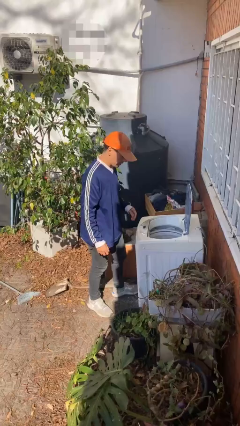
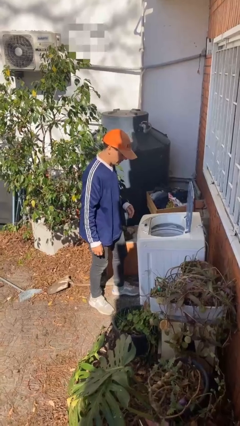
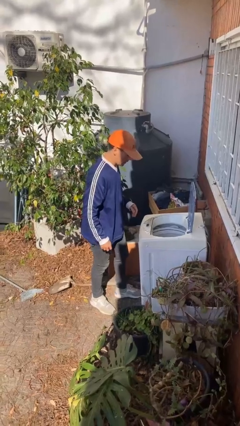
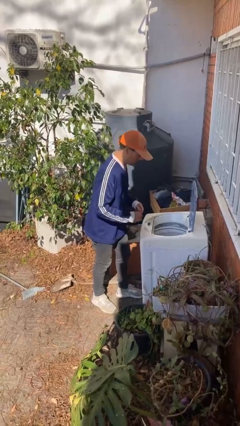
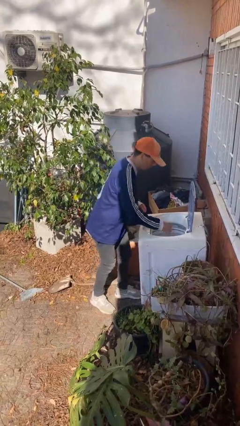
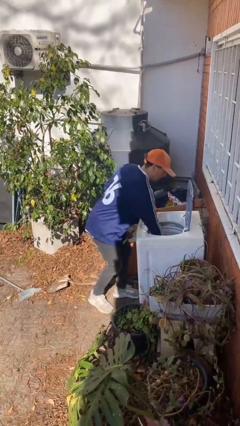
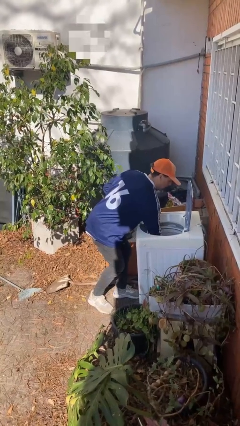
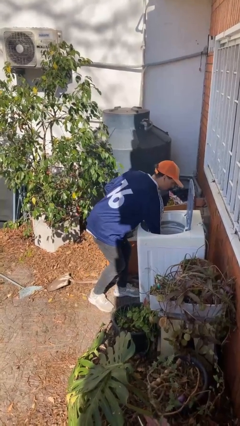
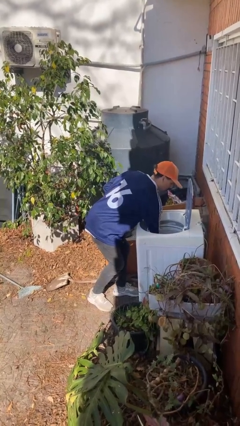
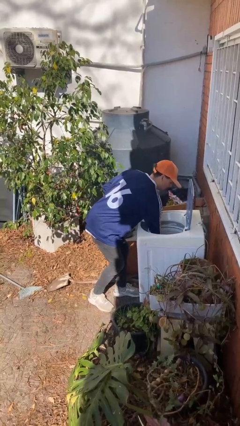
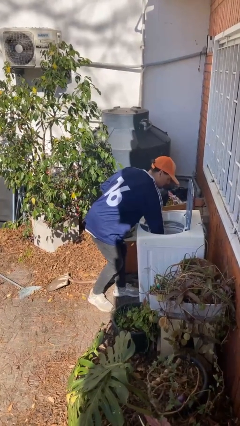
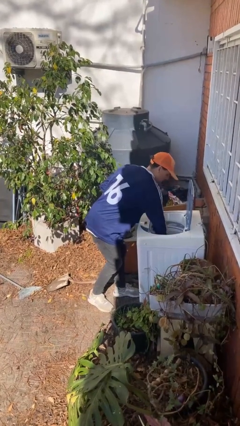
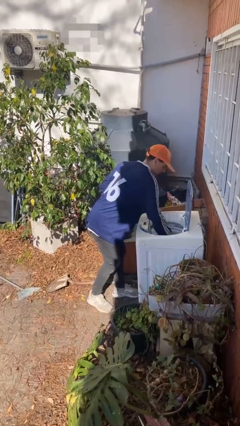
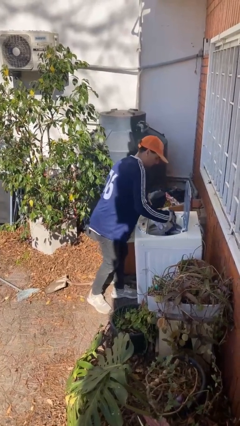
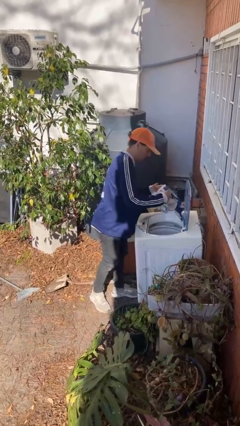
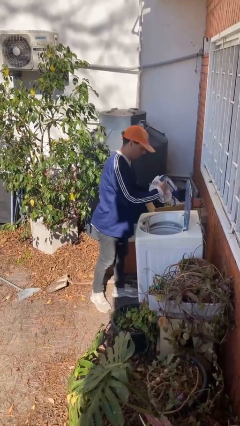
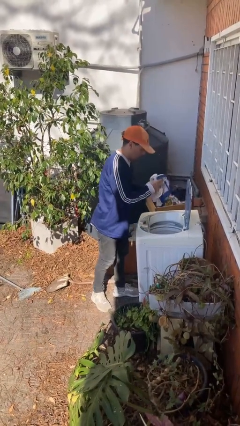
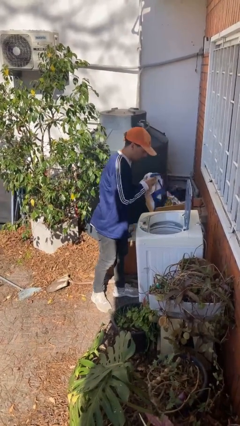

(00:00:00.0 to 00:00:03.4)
person loads clotheswasher

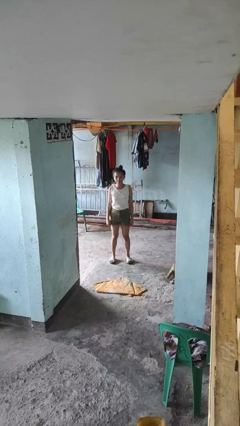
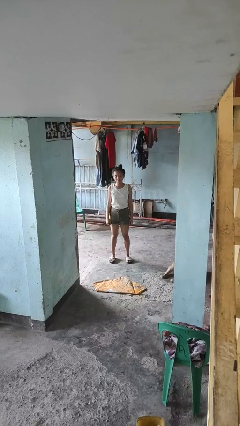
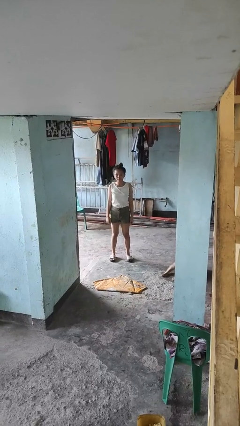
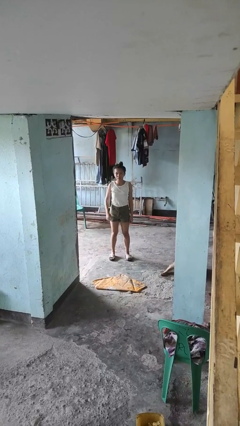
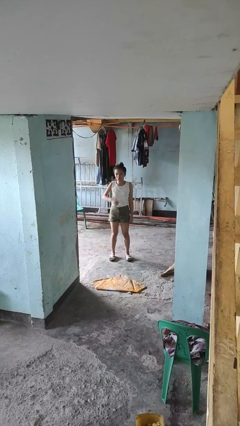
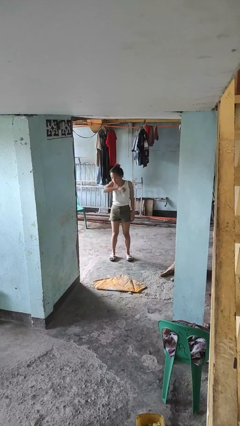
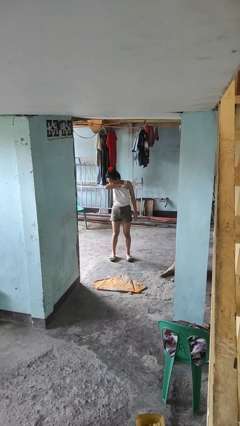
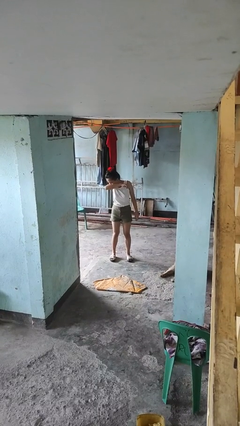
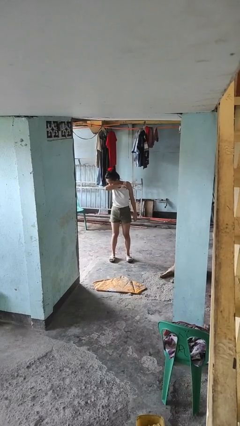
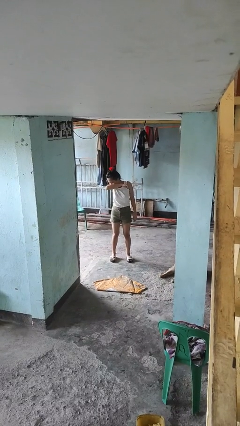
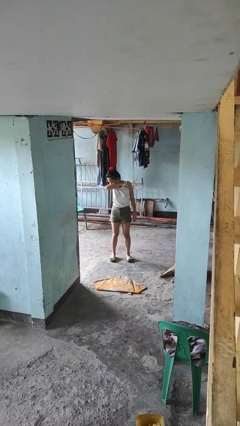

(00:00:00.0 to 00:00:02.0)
person sneezes into arm

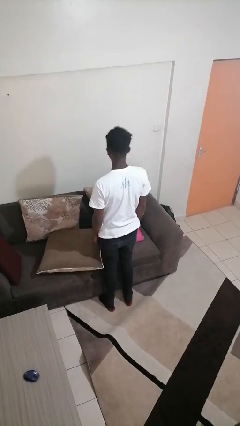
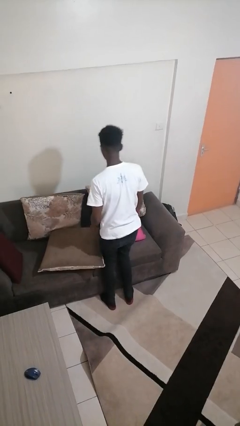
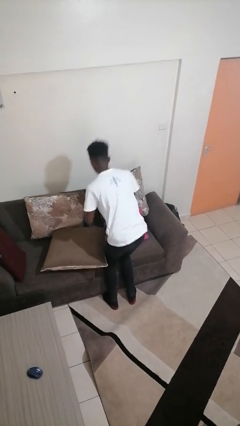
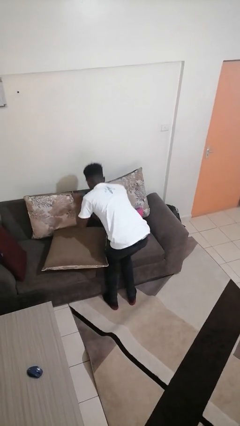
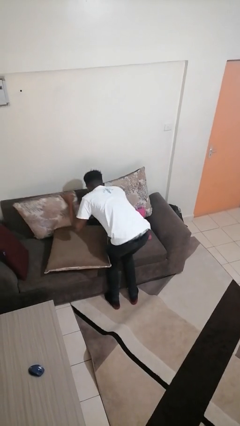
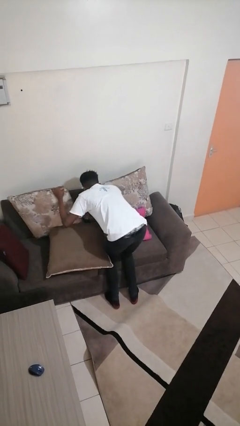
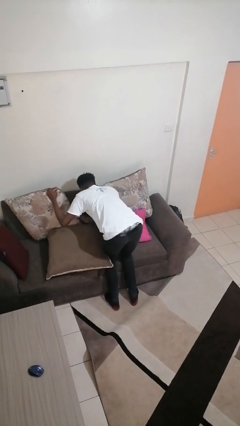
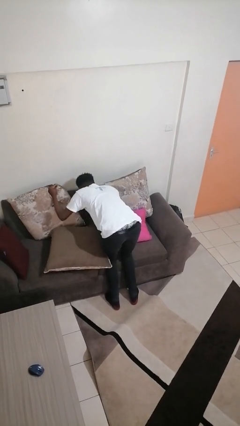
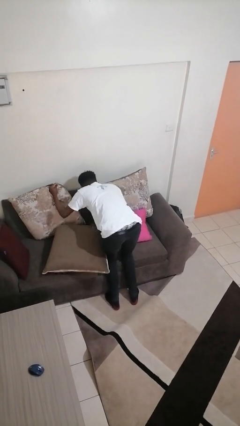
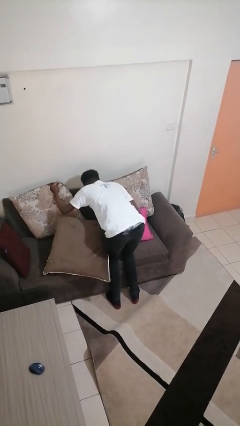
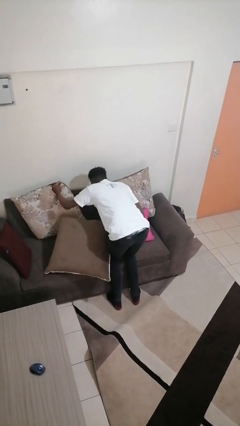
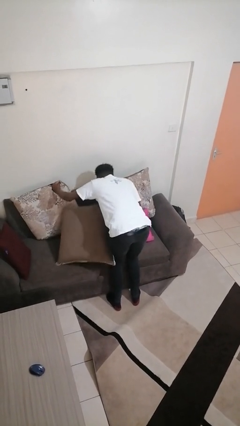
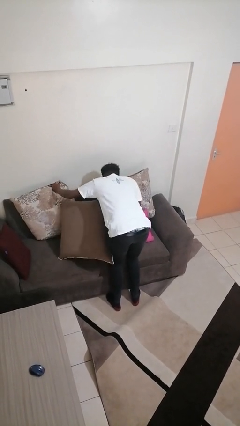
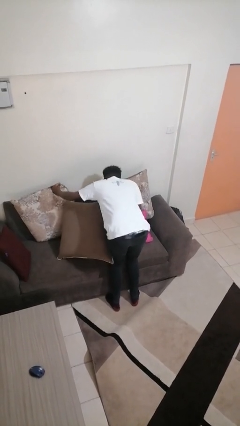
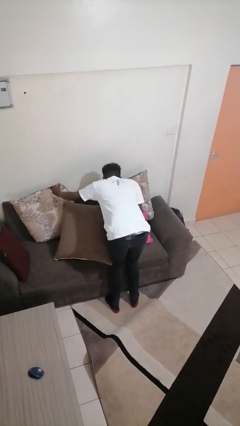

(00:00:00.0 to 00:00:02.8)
person searches in couch

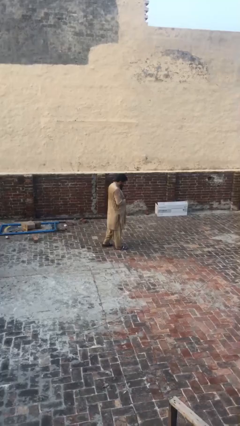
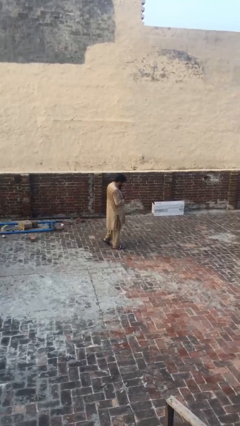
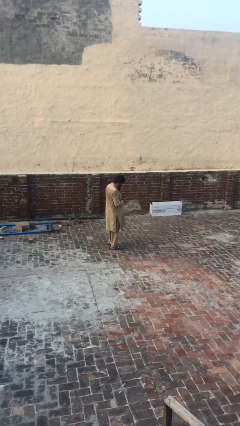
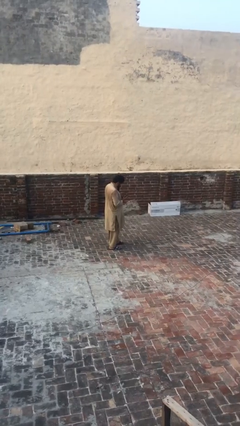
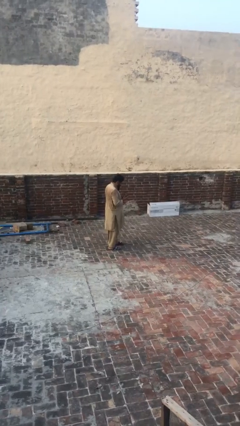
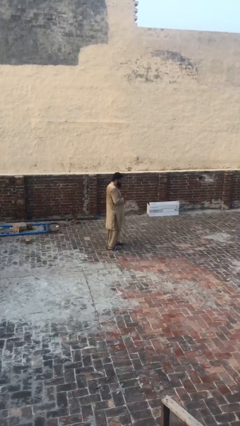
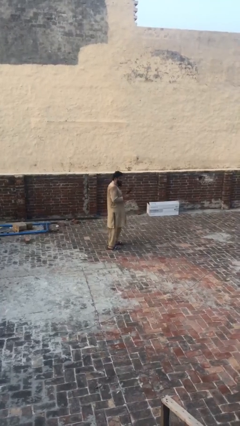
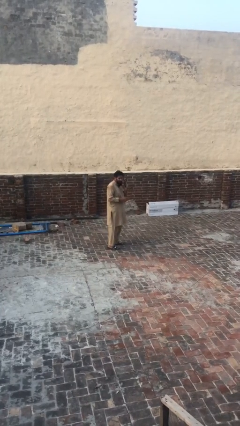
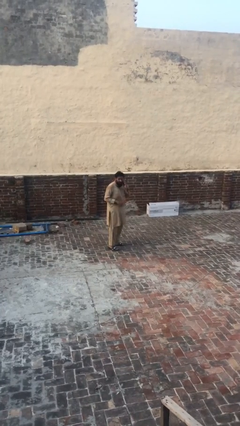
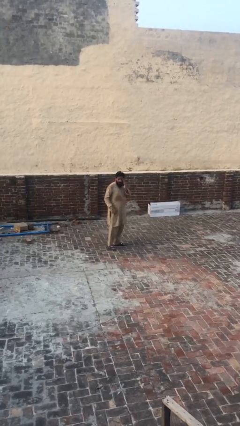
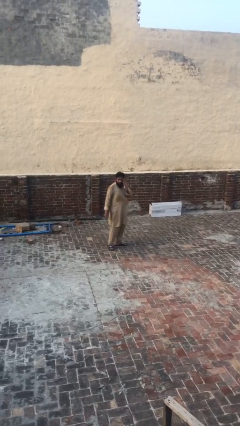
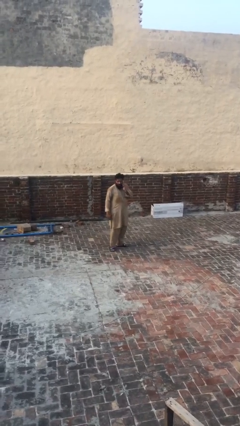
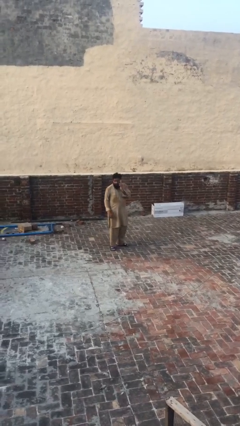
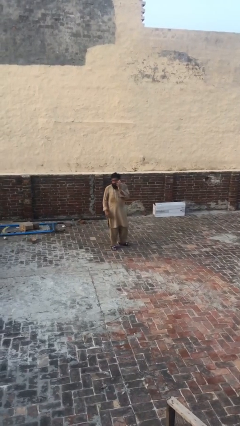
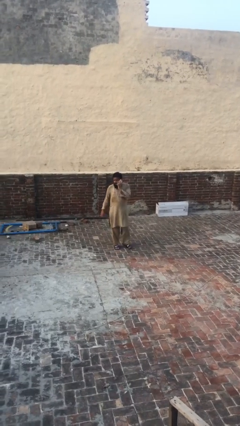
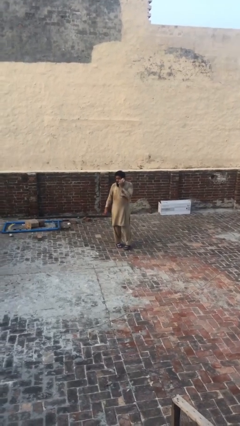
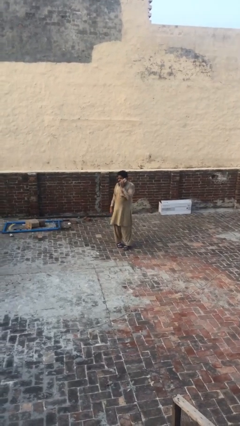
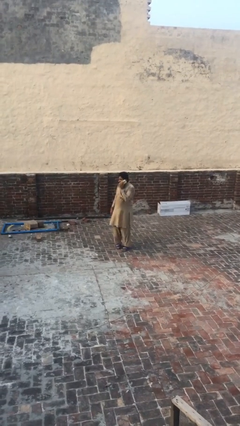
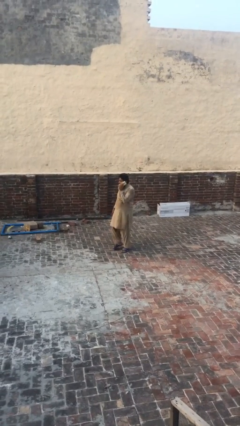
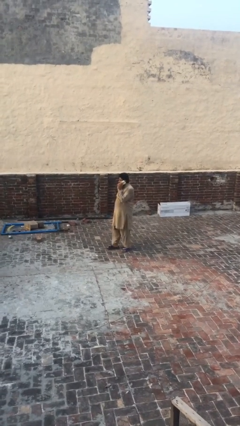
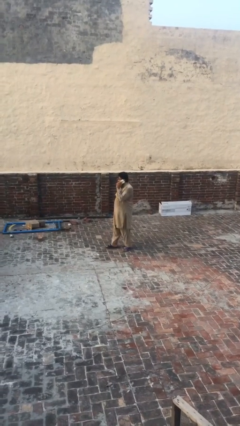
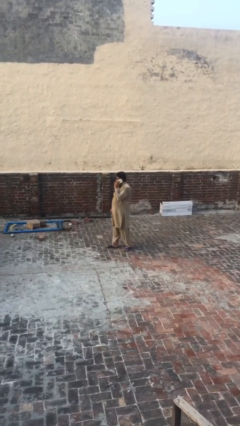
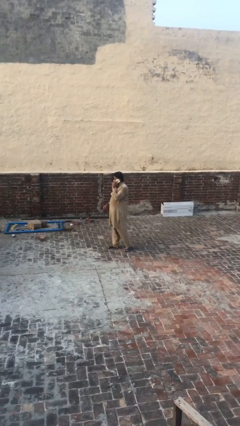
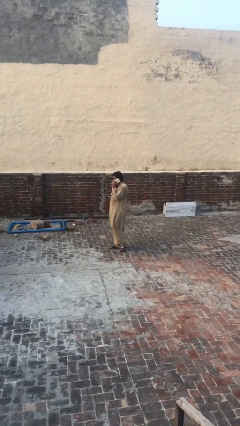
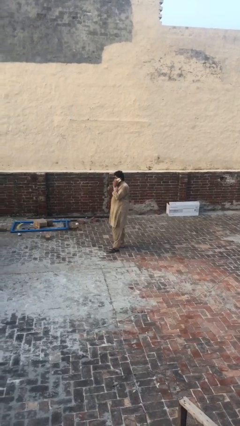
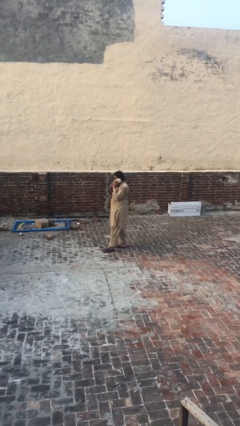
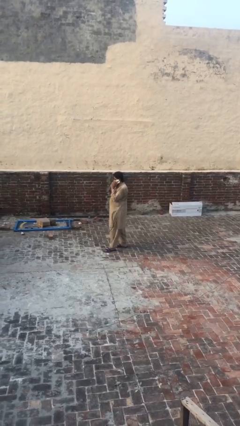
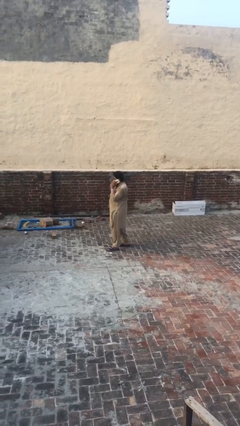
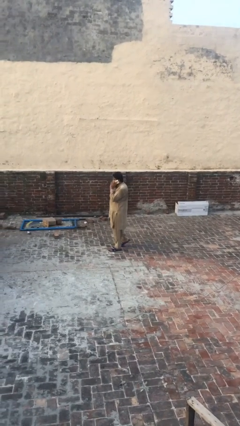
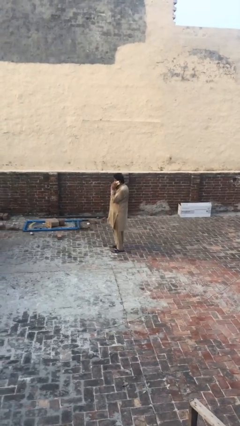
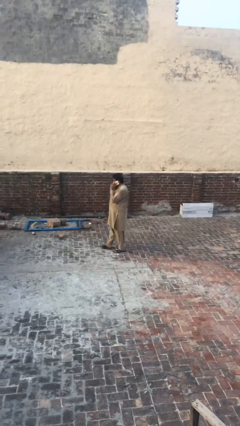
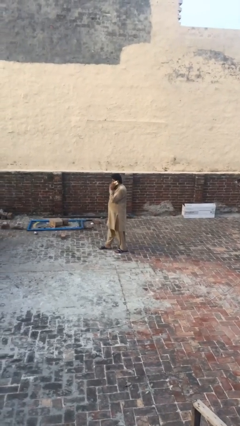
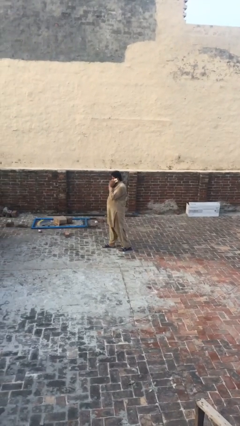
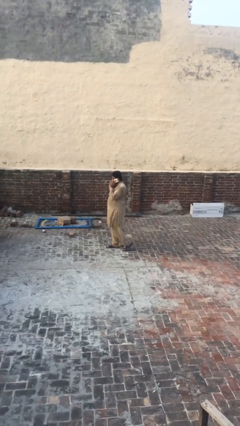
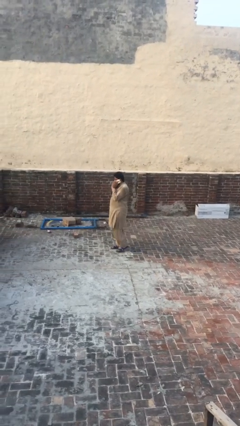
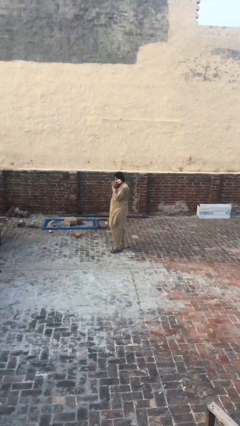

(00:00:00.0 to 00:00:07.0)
person talks on phone

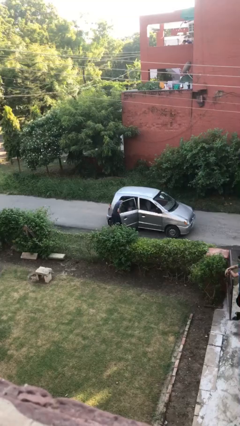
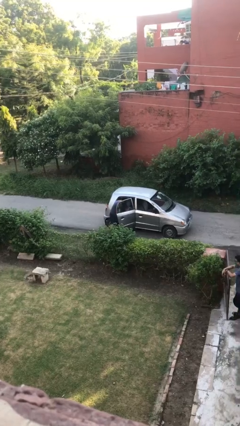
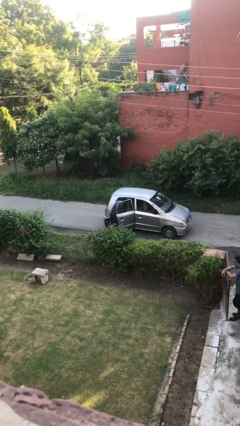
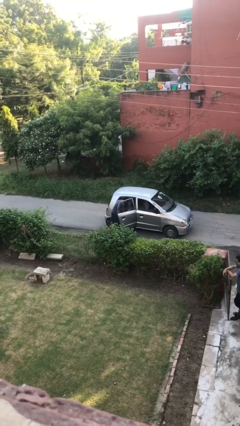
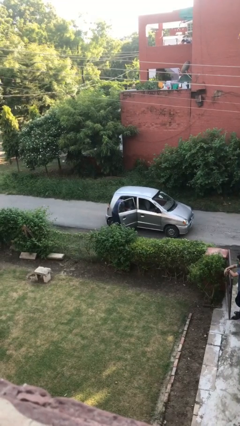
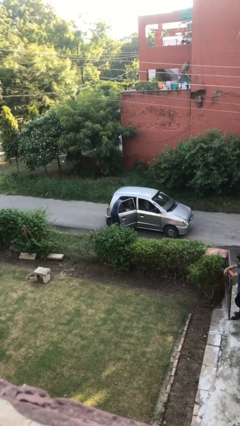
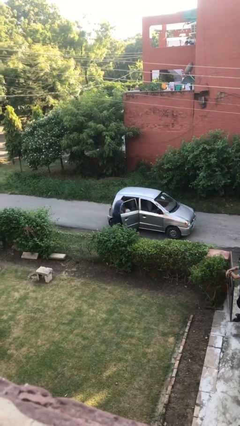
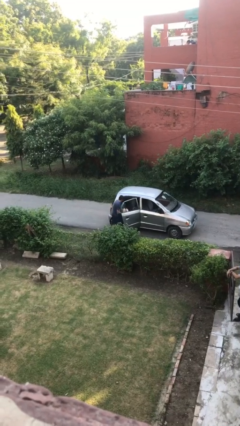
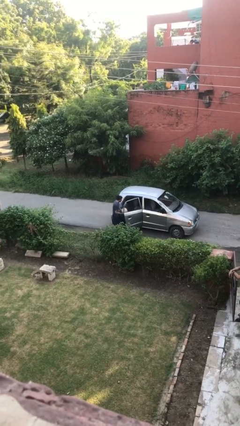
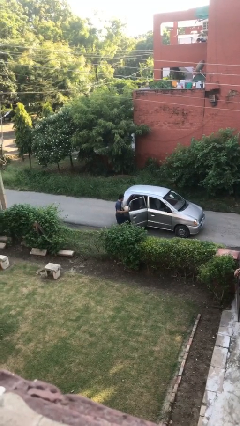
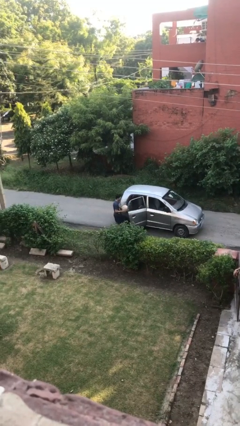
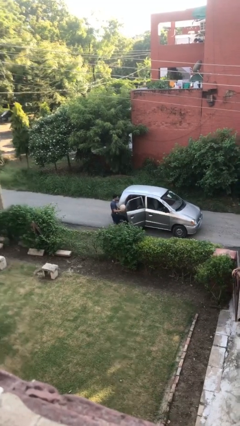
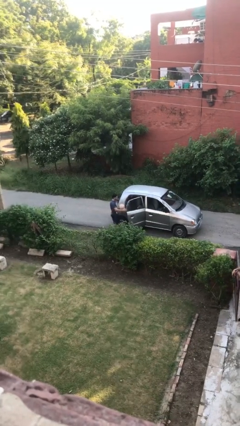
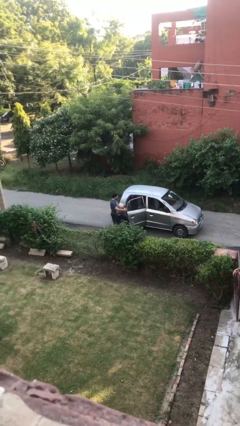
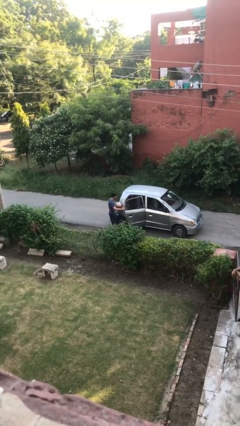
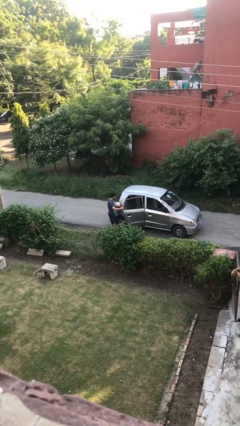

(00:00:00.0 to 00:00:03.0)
person unloads car
